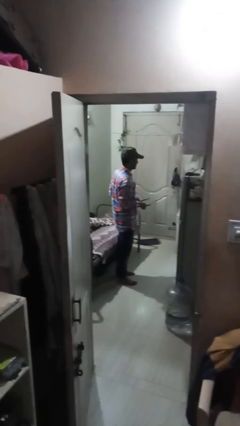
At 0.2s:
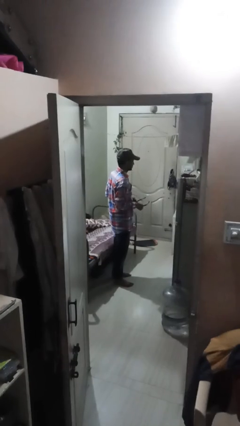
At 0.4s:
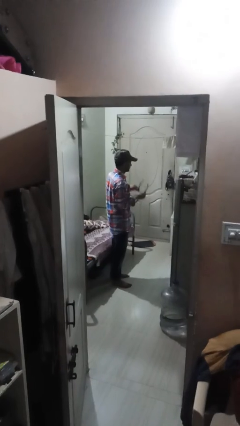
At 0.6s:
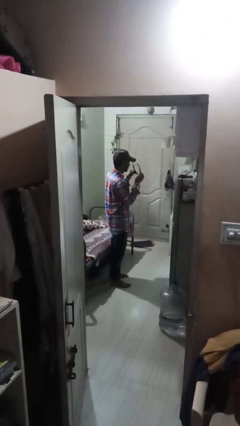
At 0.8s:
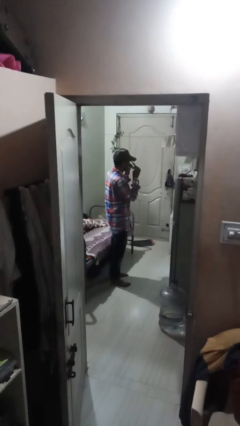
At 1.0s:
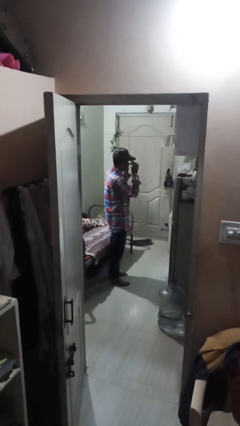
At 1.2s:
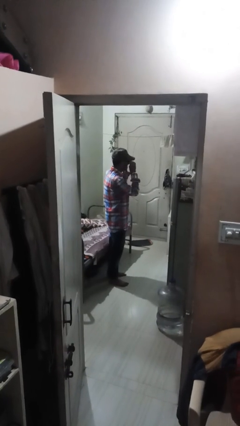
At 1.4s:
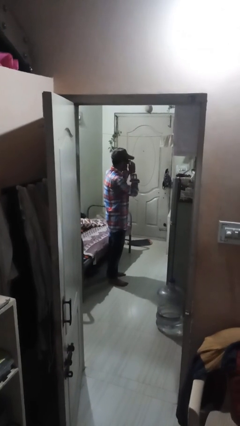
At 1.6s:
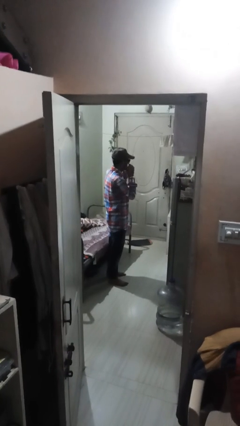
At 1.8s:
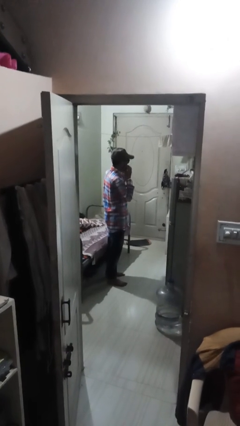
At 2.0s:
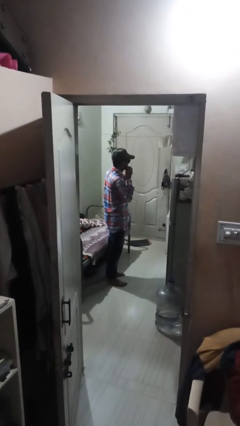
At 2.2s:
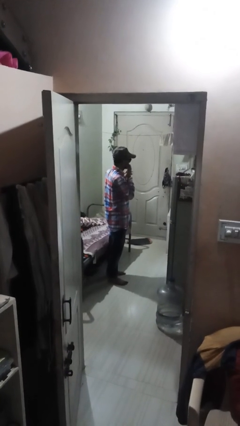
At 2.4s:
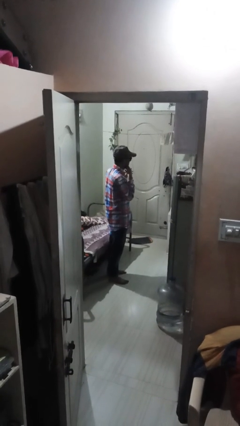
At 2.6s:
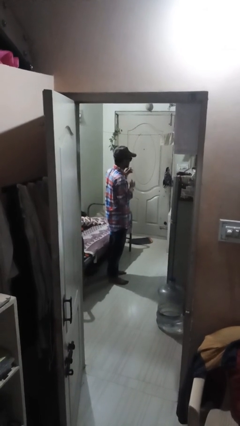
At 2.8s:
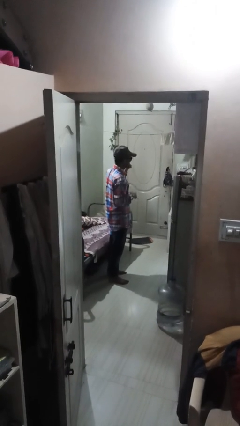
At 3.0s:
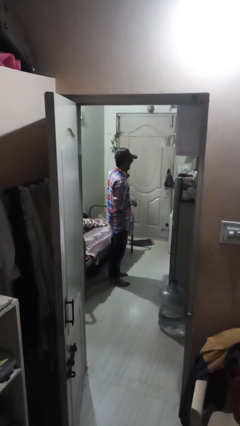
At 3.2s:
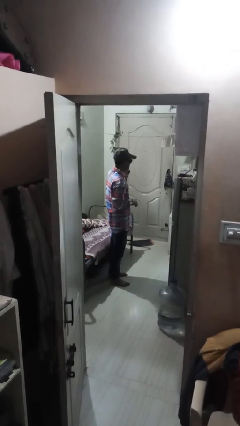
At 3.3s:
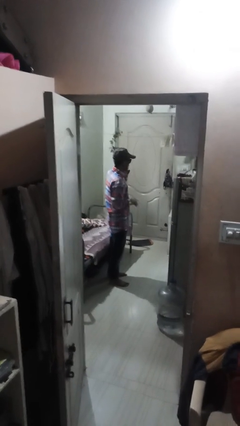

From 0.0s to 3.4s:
person puts on sunglasses

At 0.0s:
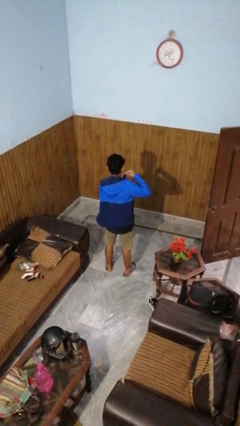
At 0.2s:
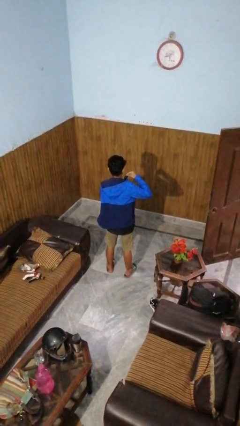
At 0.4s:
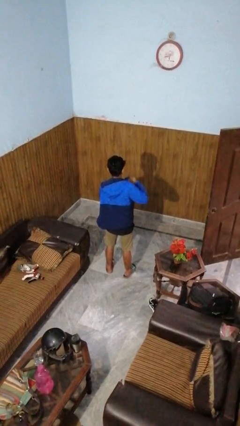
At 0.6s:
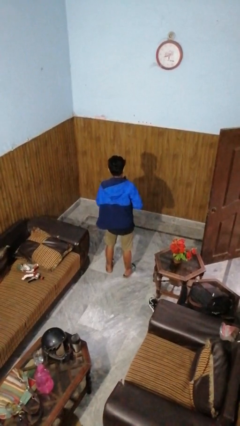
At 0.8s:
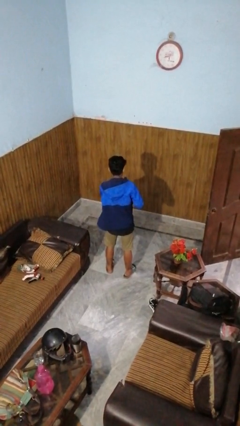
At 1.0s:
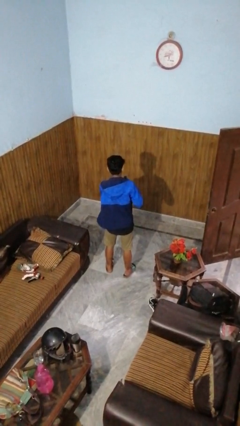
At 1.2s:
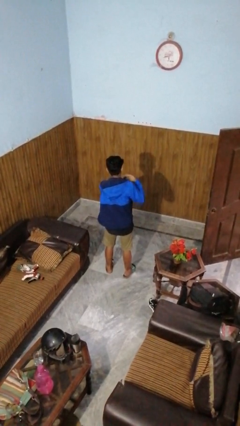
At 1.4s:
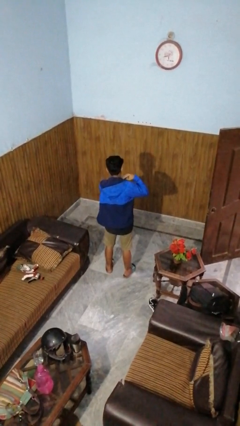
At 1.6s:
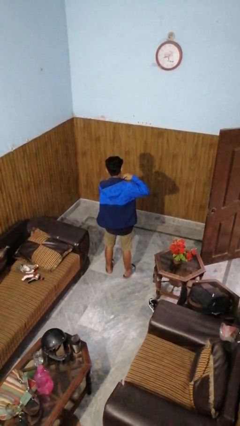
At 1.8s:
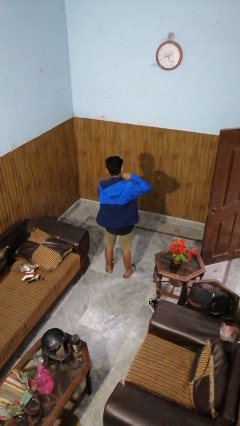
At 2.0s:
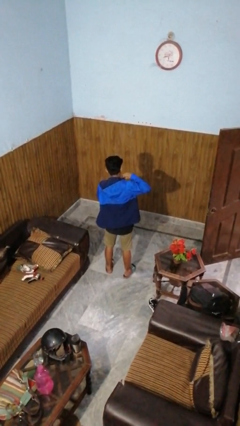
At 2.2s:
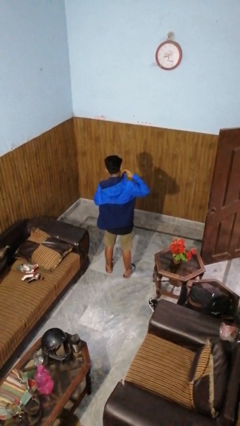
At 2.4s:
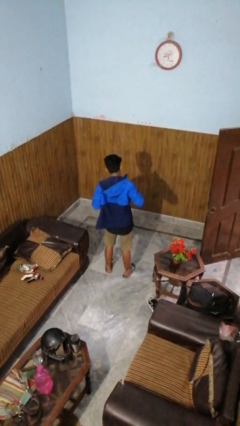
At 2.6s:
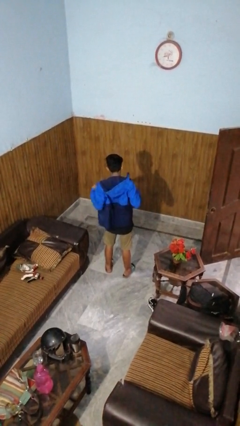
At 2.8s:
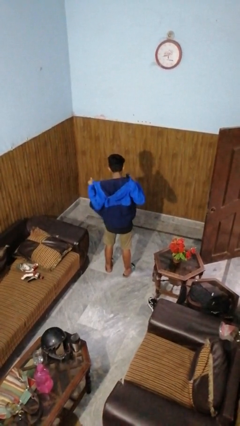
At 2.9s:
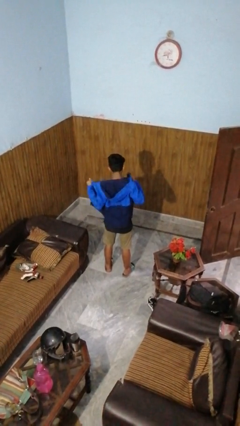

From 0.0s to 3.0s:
person unzips jacket

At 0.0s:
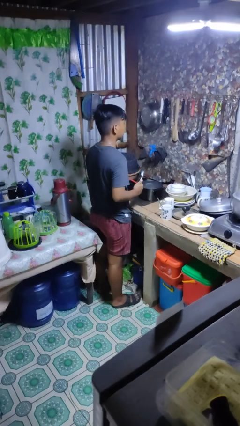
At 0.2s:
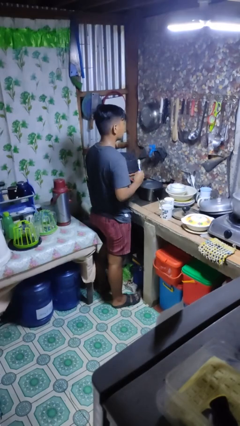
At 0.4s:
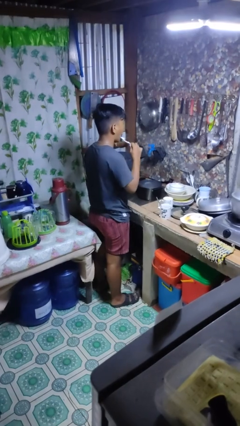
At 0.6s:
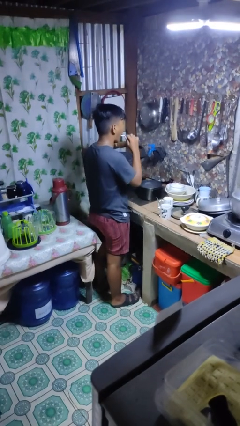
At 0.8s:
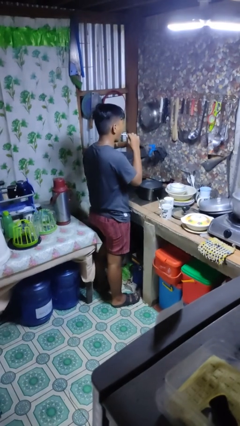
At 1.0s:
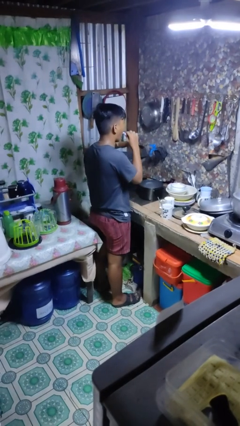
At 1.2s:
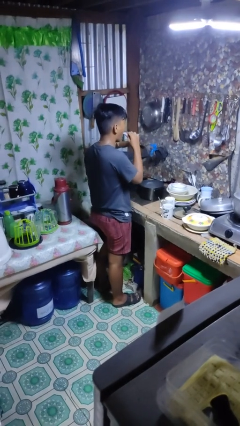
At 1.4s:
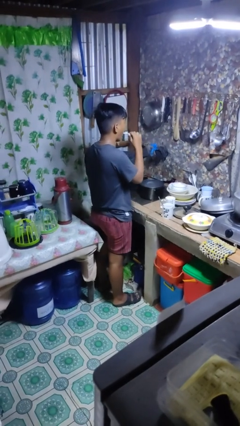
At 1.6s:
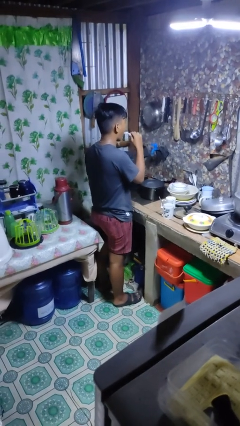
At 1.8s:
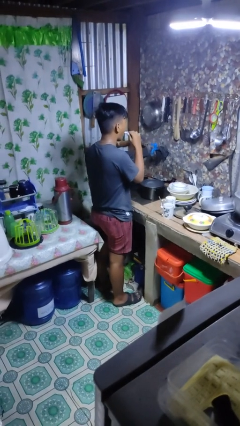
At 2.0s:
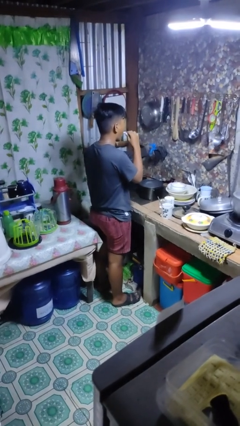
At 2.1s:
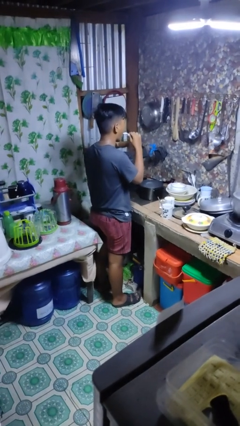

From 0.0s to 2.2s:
person brushes teeth

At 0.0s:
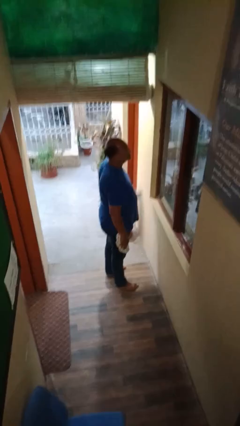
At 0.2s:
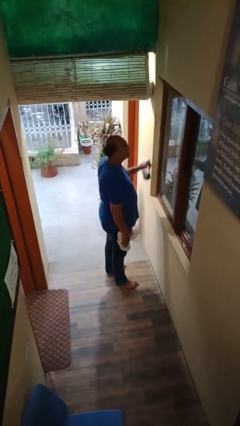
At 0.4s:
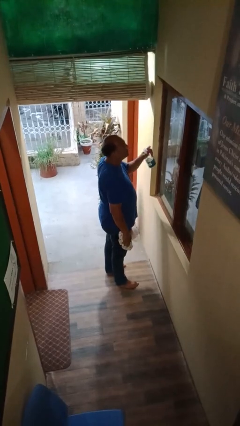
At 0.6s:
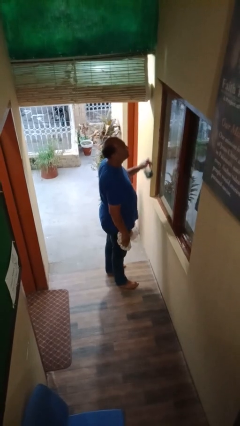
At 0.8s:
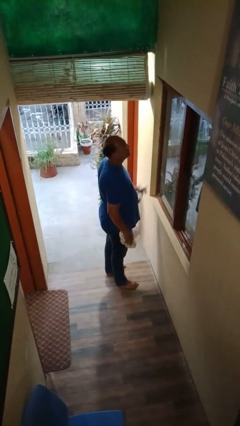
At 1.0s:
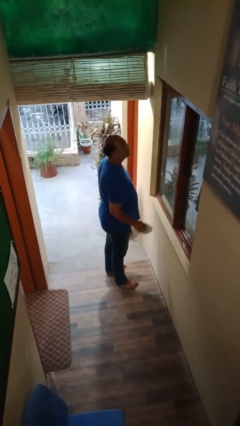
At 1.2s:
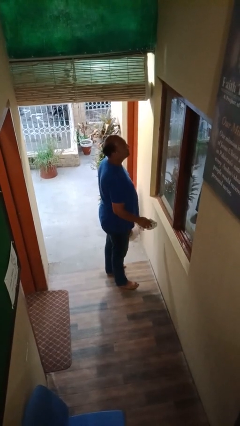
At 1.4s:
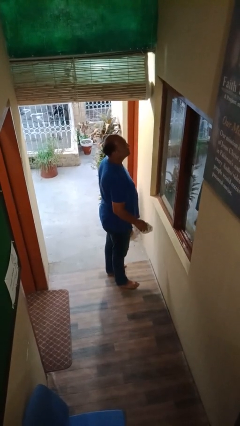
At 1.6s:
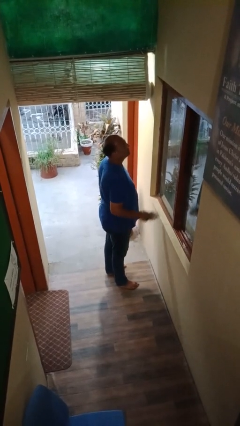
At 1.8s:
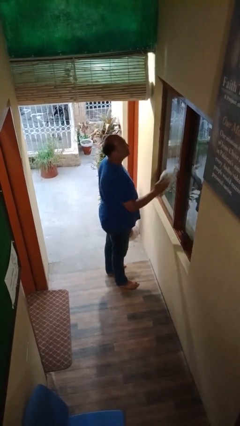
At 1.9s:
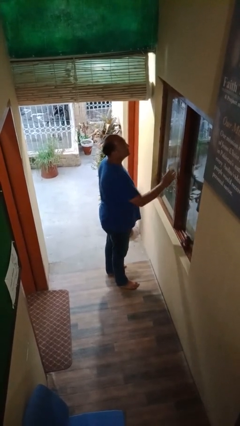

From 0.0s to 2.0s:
person sprays from bottle

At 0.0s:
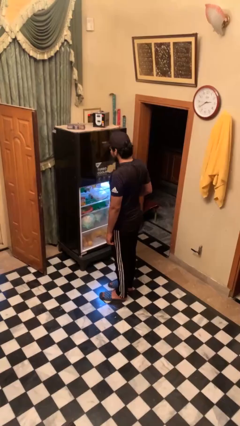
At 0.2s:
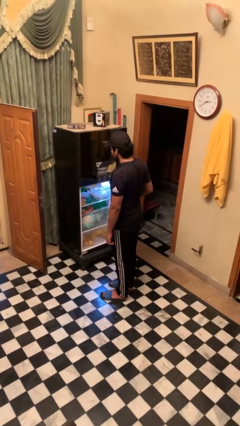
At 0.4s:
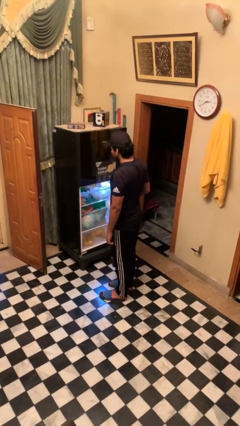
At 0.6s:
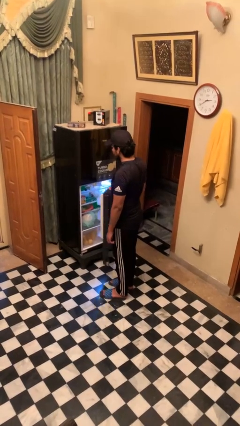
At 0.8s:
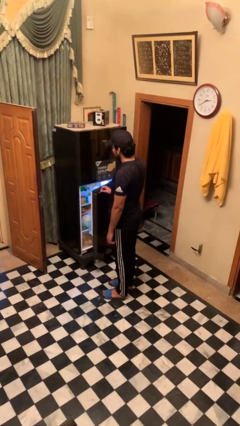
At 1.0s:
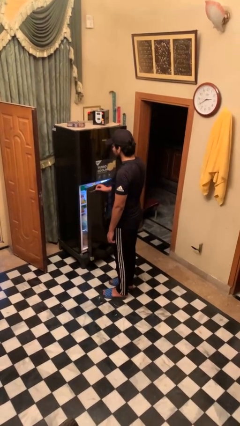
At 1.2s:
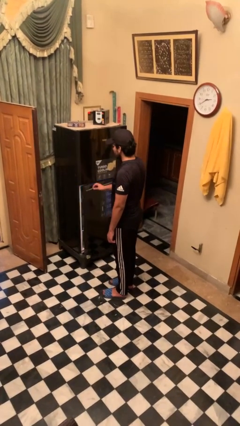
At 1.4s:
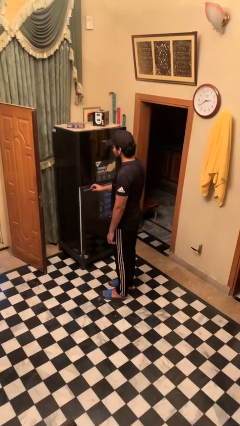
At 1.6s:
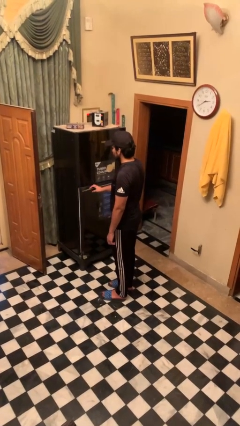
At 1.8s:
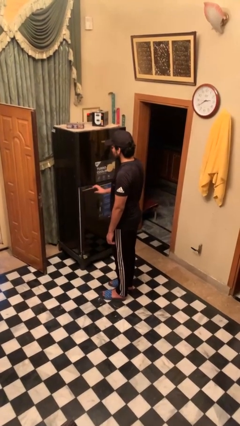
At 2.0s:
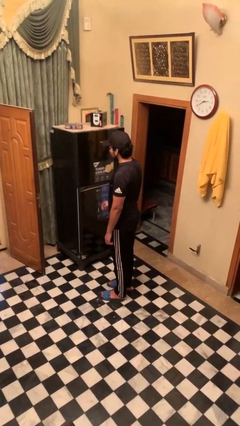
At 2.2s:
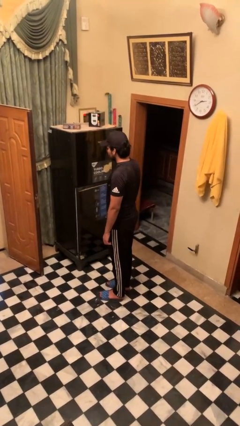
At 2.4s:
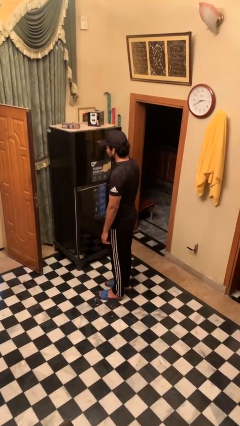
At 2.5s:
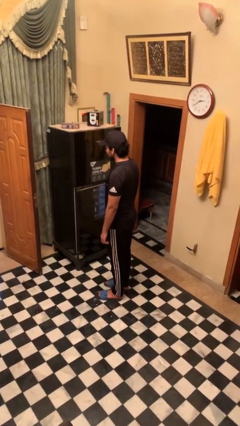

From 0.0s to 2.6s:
person closes refrigerator

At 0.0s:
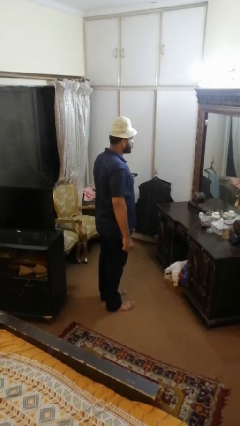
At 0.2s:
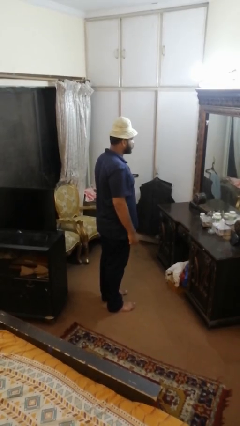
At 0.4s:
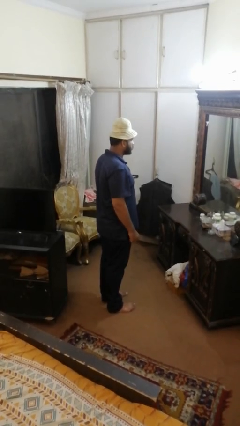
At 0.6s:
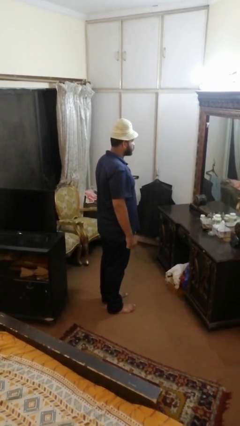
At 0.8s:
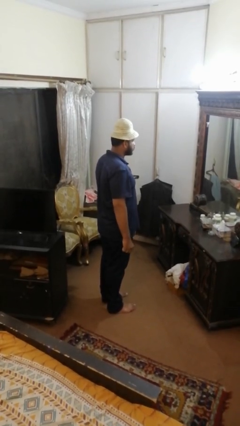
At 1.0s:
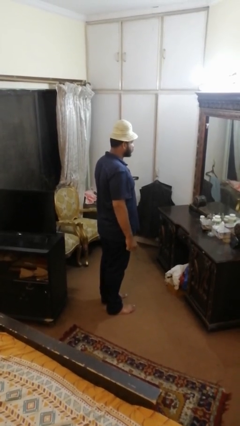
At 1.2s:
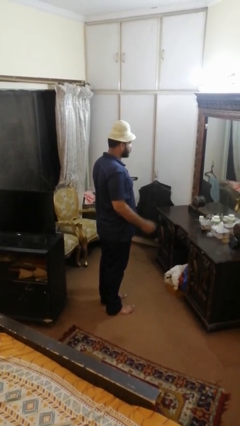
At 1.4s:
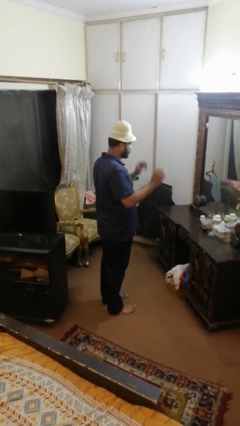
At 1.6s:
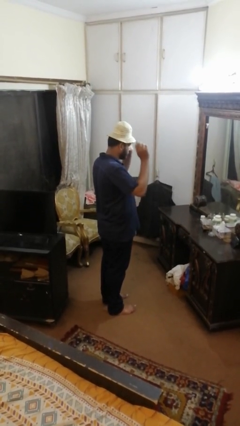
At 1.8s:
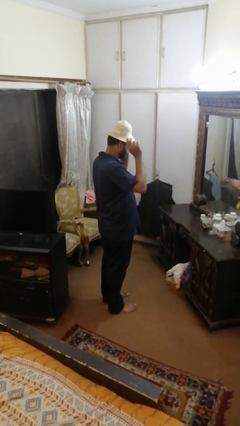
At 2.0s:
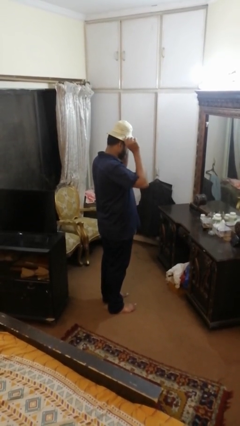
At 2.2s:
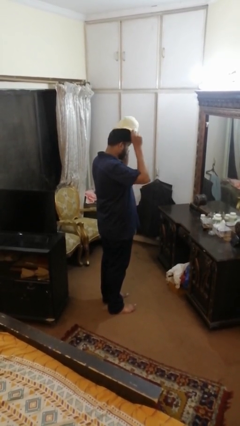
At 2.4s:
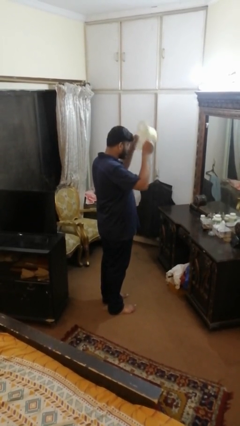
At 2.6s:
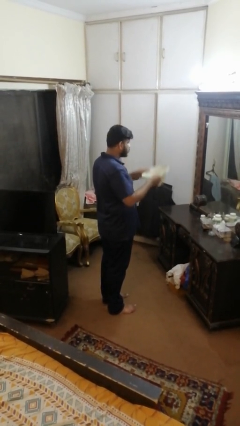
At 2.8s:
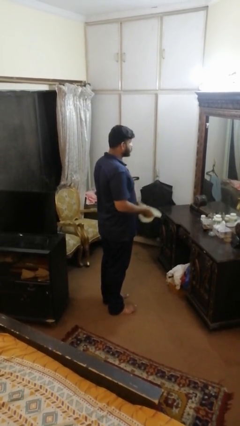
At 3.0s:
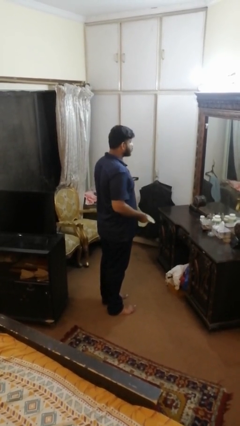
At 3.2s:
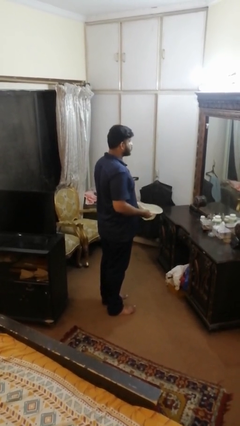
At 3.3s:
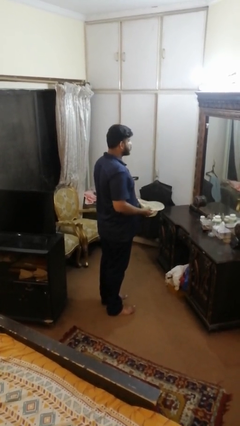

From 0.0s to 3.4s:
person takes off hat

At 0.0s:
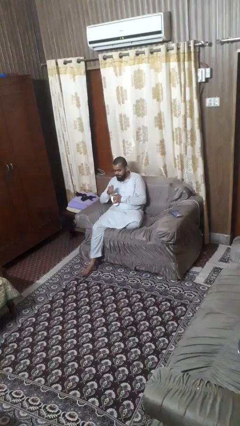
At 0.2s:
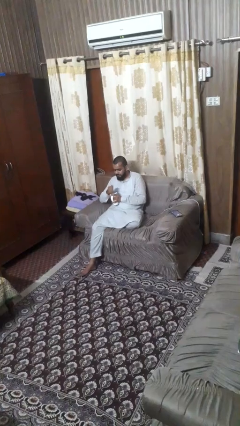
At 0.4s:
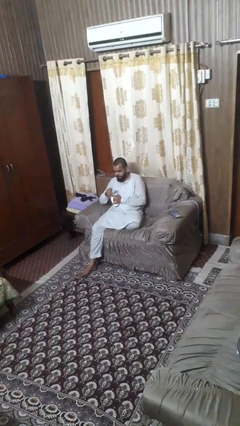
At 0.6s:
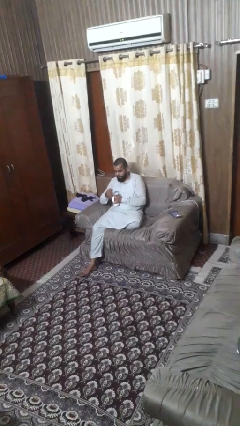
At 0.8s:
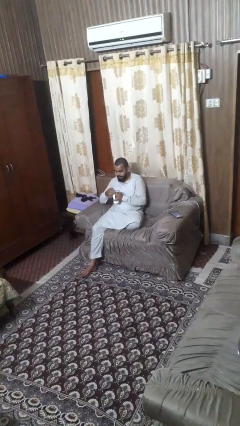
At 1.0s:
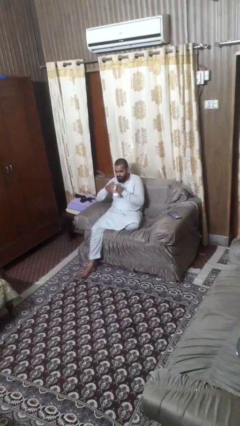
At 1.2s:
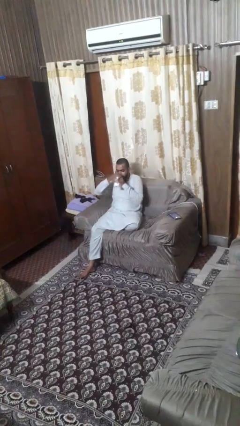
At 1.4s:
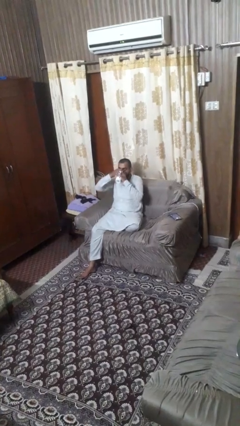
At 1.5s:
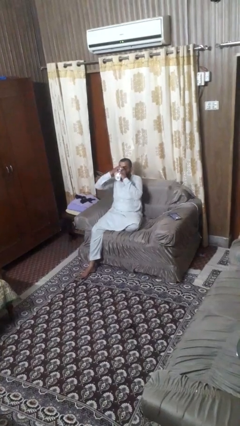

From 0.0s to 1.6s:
person stirs mug
